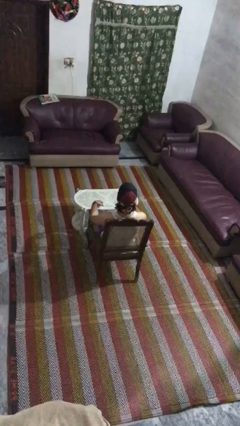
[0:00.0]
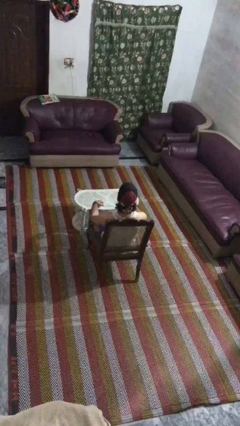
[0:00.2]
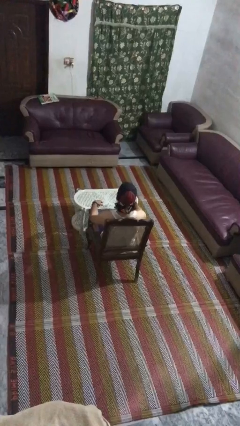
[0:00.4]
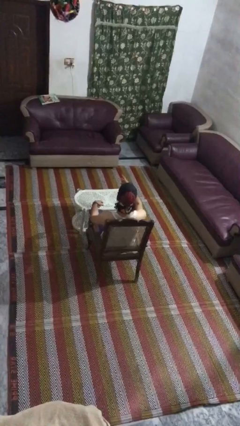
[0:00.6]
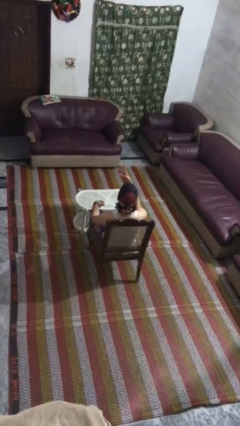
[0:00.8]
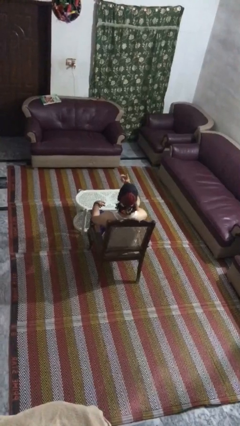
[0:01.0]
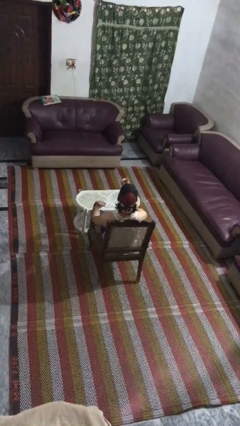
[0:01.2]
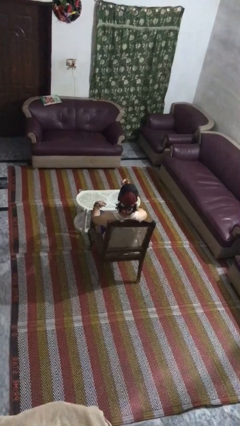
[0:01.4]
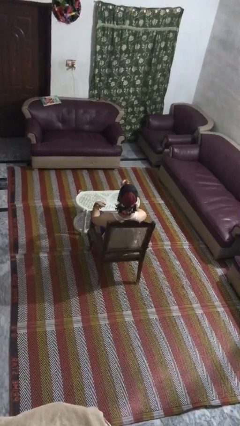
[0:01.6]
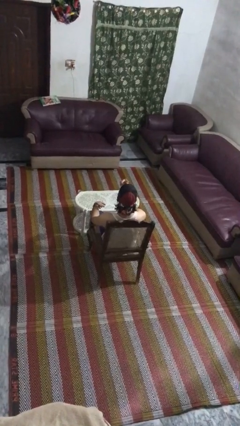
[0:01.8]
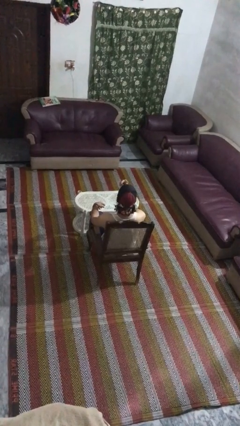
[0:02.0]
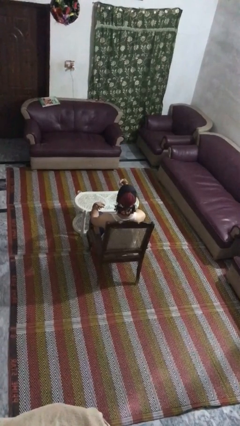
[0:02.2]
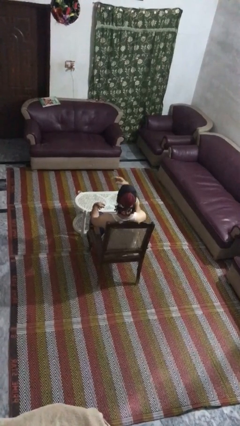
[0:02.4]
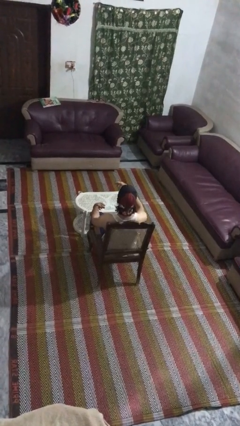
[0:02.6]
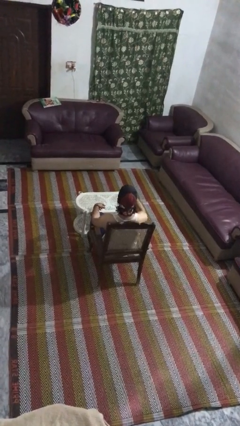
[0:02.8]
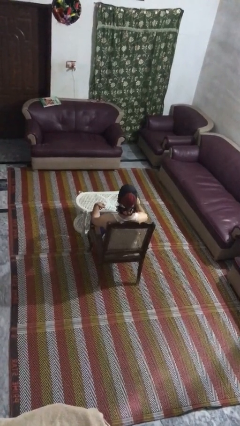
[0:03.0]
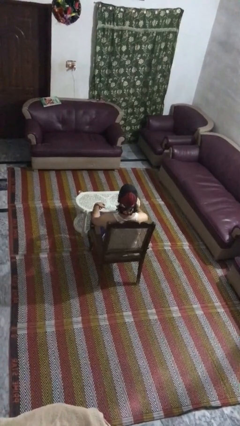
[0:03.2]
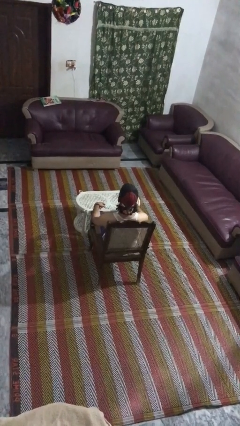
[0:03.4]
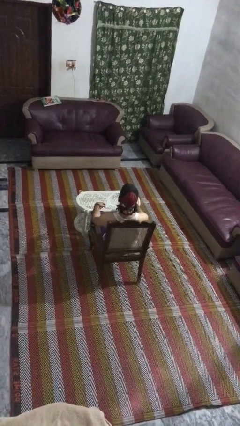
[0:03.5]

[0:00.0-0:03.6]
person gestures watch closely

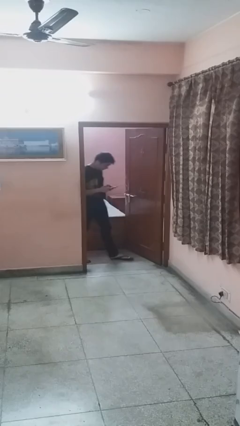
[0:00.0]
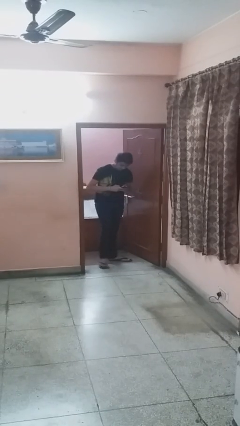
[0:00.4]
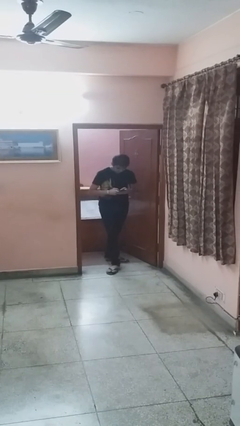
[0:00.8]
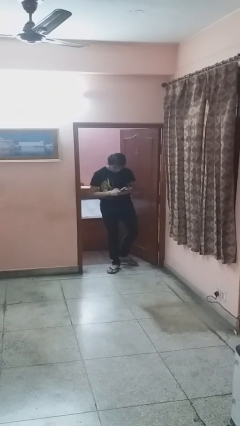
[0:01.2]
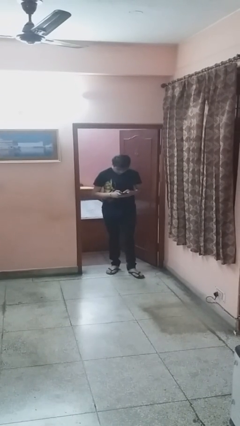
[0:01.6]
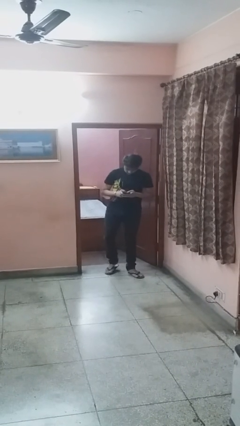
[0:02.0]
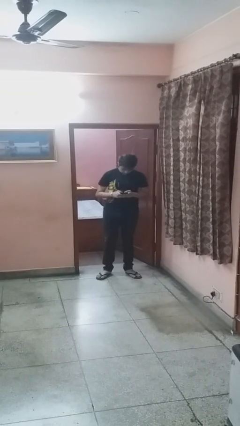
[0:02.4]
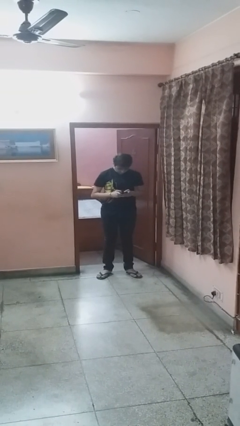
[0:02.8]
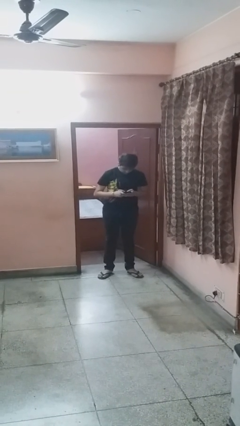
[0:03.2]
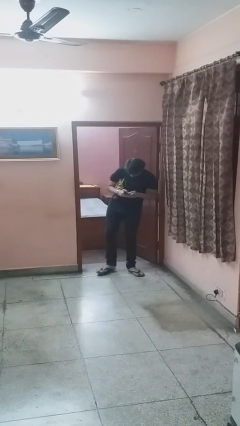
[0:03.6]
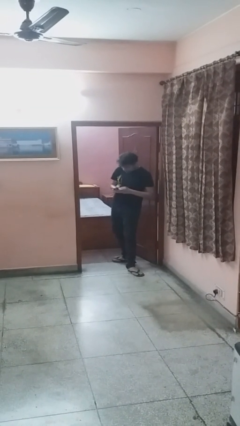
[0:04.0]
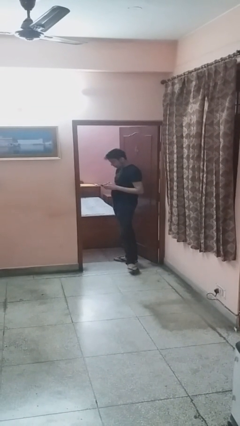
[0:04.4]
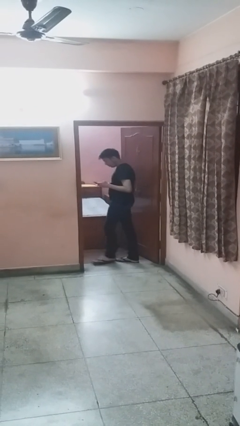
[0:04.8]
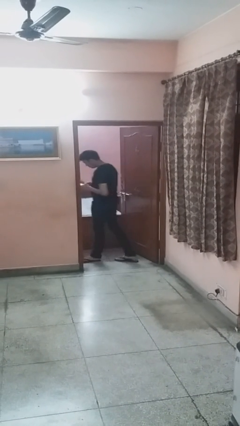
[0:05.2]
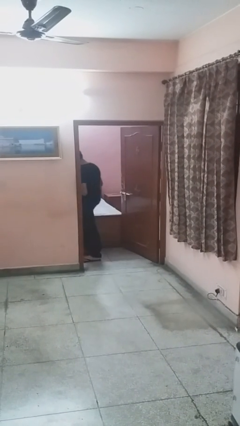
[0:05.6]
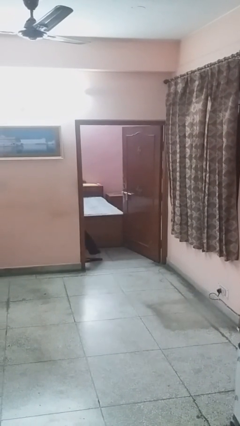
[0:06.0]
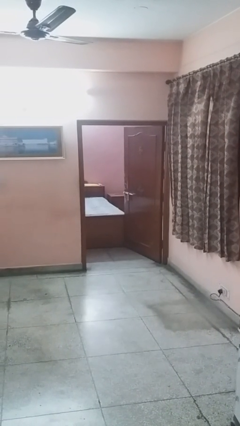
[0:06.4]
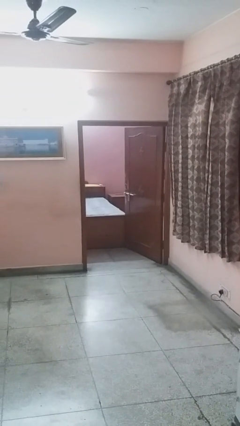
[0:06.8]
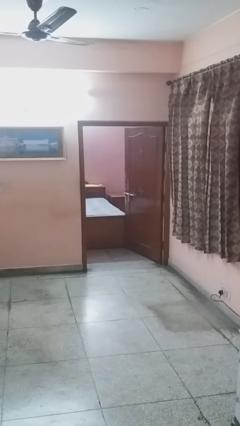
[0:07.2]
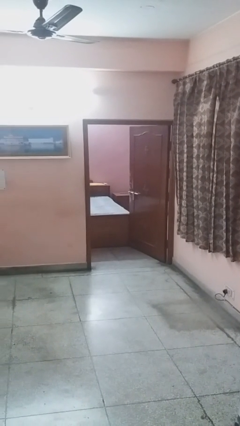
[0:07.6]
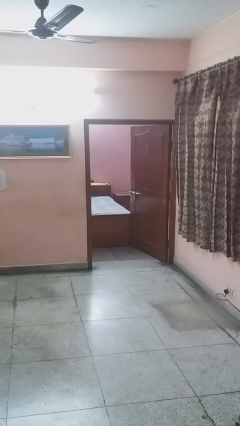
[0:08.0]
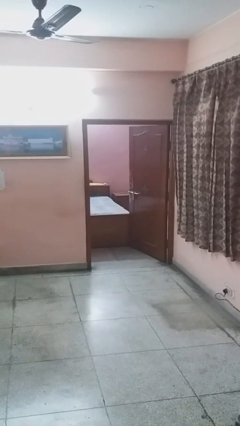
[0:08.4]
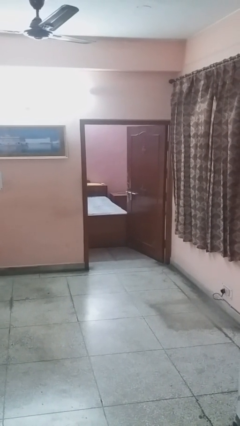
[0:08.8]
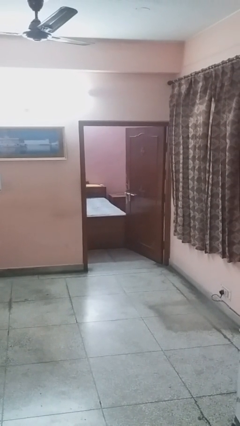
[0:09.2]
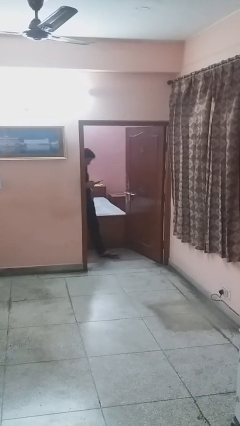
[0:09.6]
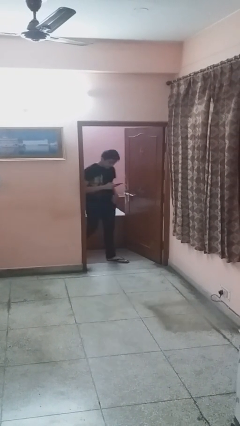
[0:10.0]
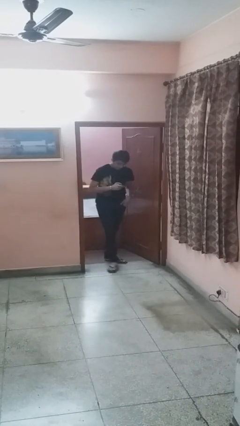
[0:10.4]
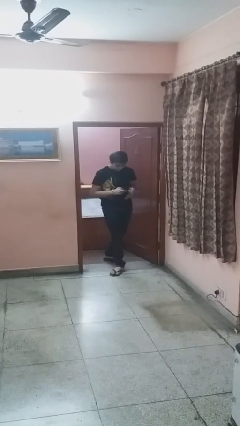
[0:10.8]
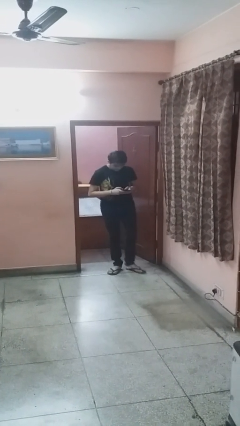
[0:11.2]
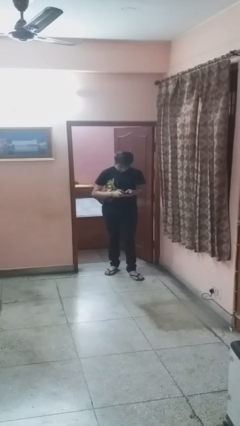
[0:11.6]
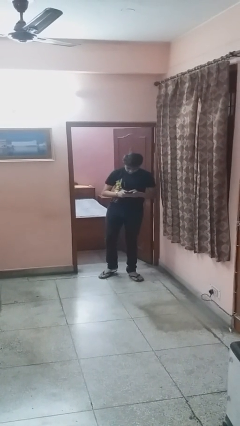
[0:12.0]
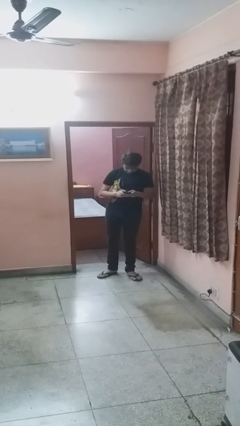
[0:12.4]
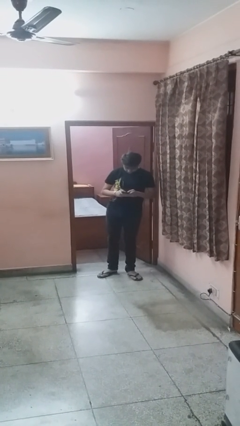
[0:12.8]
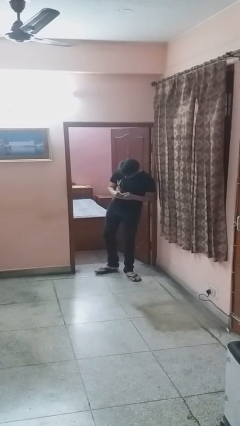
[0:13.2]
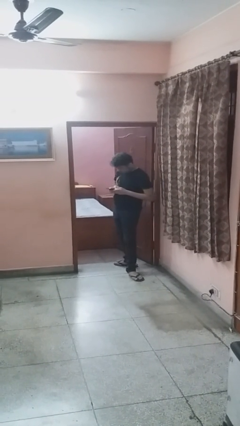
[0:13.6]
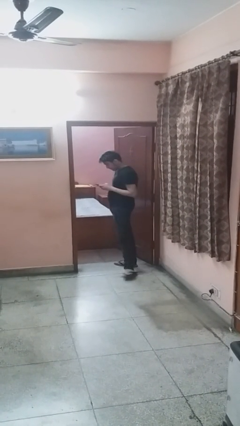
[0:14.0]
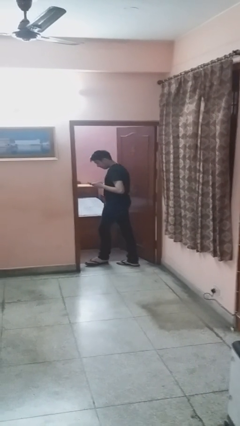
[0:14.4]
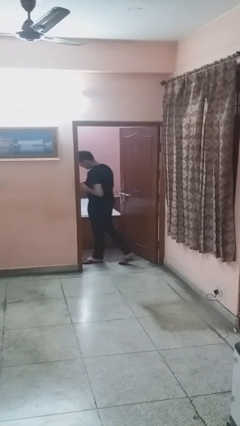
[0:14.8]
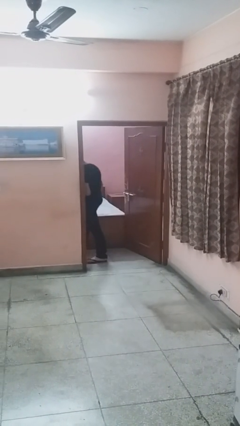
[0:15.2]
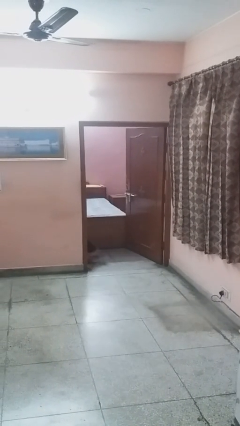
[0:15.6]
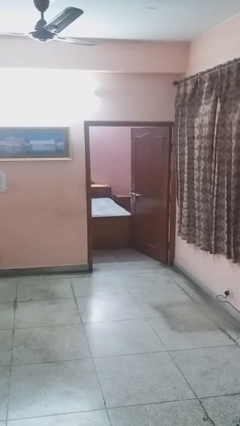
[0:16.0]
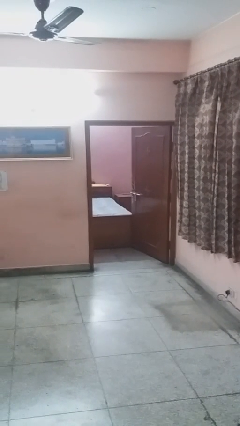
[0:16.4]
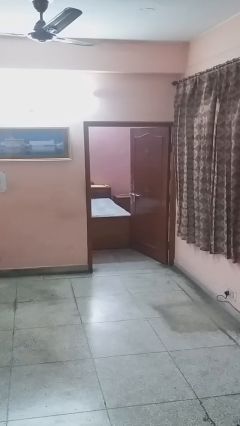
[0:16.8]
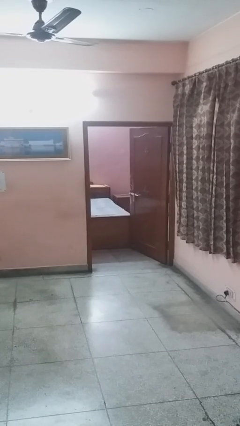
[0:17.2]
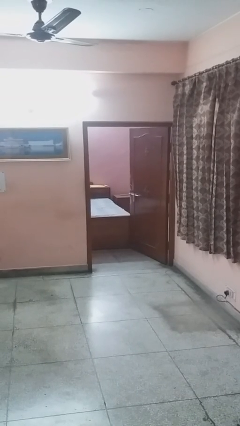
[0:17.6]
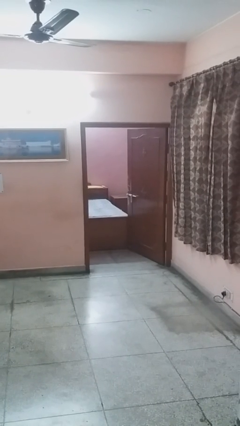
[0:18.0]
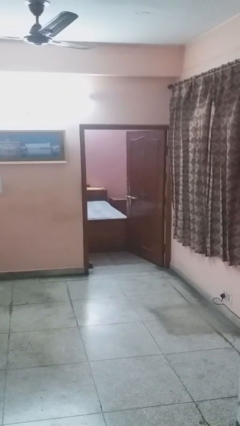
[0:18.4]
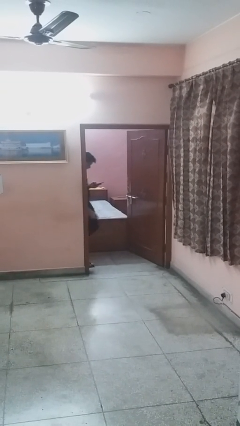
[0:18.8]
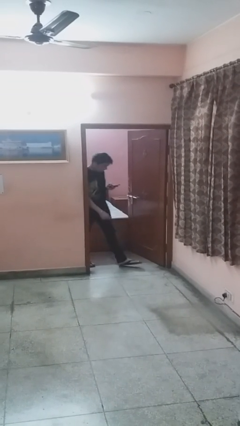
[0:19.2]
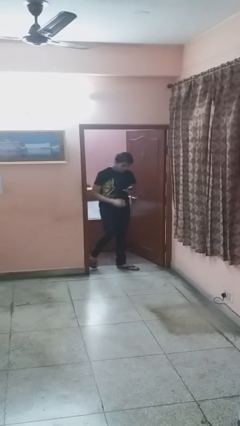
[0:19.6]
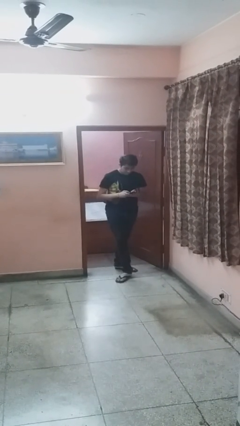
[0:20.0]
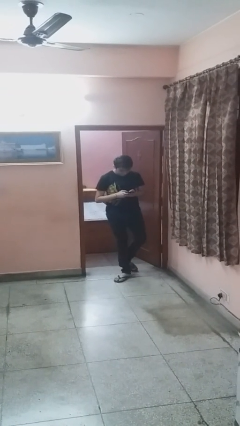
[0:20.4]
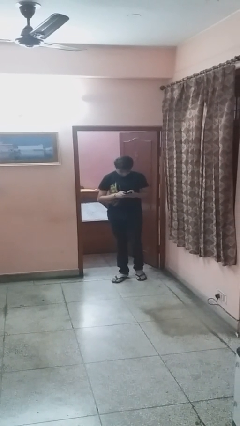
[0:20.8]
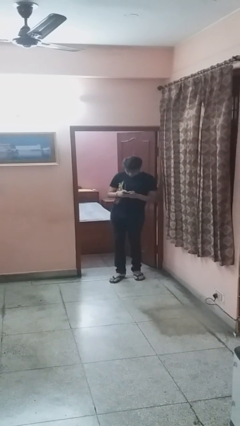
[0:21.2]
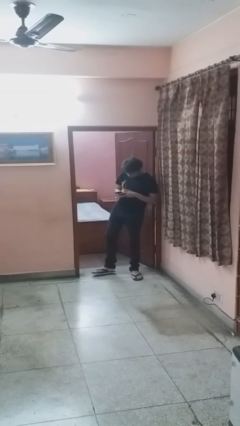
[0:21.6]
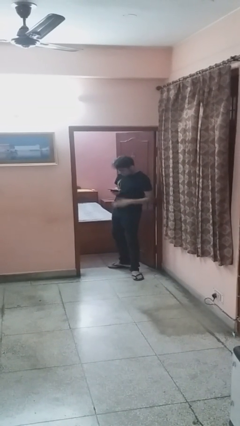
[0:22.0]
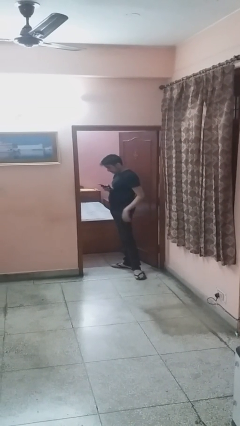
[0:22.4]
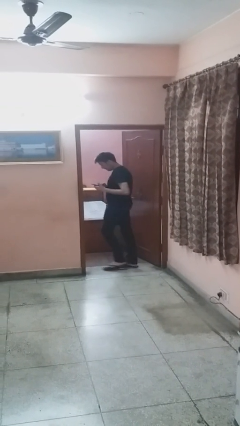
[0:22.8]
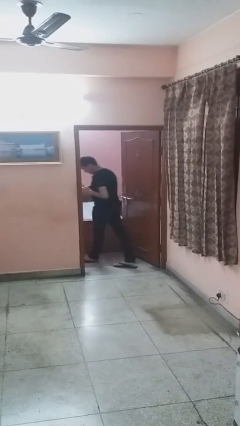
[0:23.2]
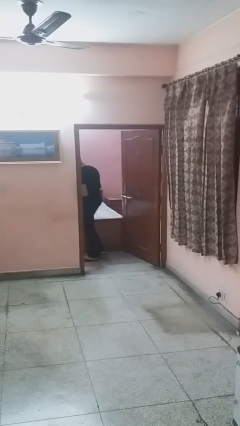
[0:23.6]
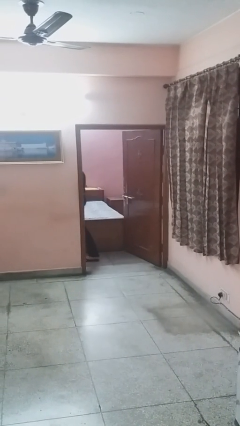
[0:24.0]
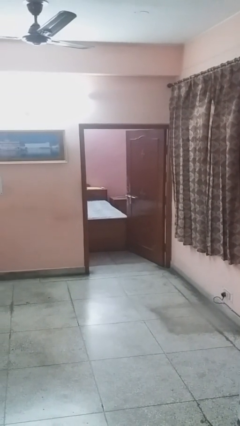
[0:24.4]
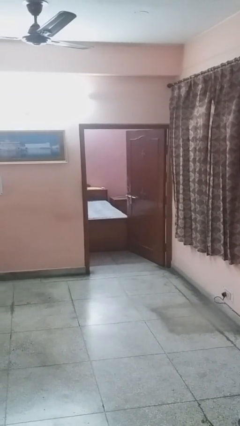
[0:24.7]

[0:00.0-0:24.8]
person texts on phone

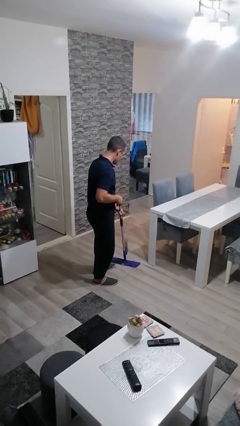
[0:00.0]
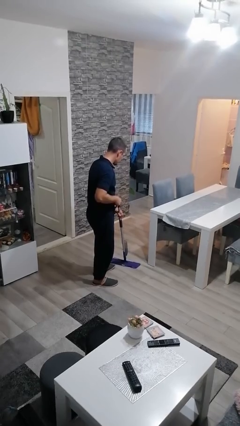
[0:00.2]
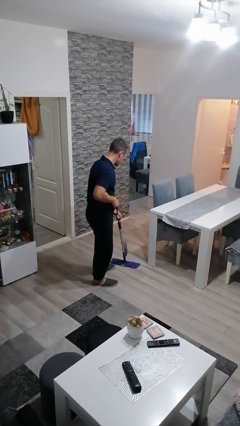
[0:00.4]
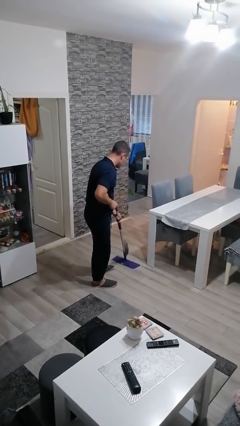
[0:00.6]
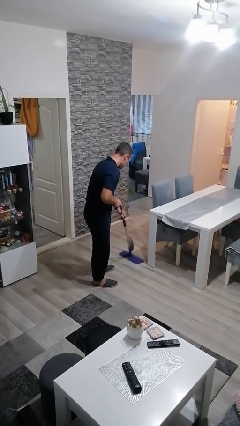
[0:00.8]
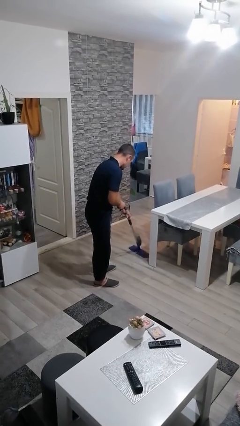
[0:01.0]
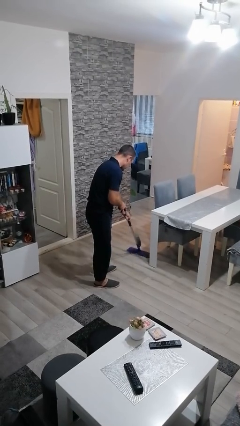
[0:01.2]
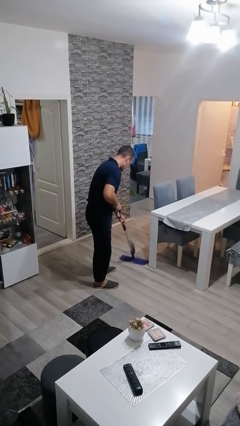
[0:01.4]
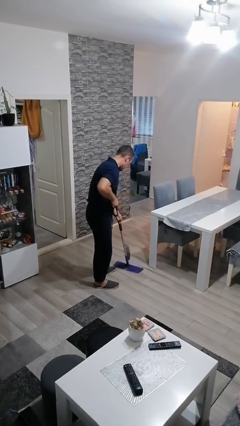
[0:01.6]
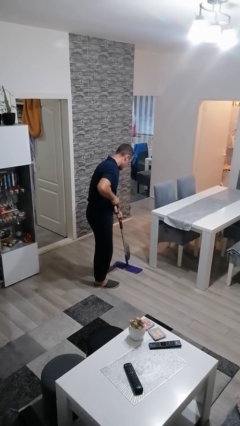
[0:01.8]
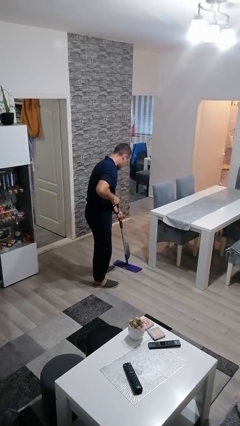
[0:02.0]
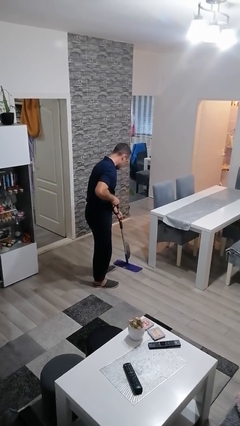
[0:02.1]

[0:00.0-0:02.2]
person mops

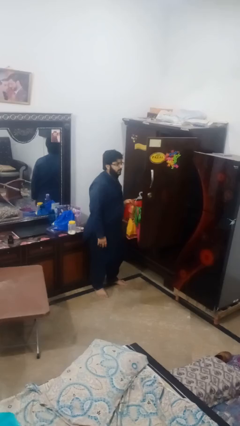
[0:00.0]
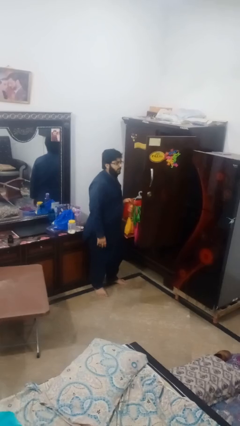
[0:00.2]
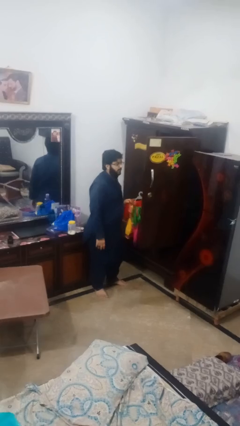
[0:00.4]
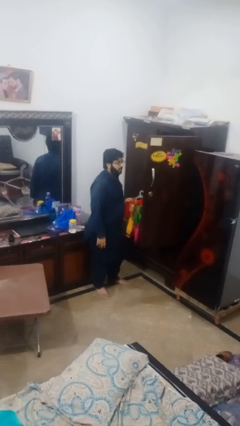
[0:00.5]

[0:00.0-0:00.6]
person takes clothes from closet
